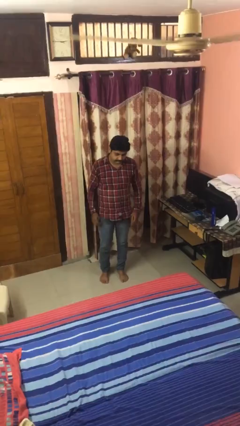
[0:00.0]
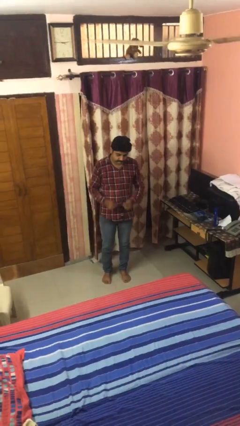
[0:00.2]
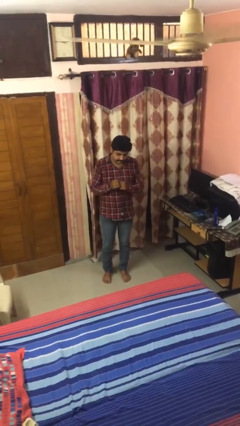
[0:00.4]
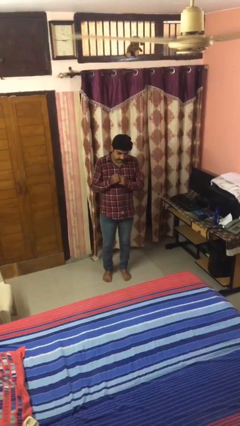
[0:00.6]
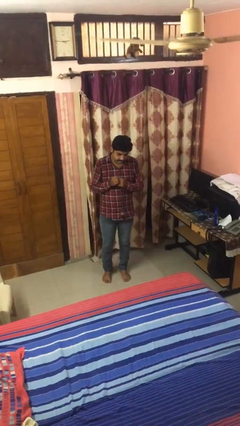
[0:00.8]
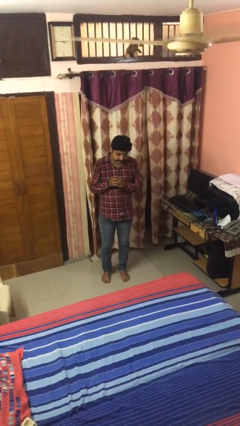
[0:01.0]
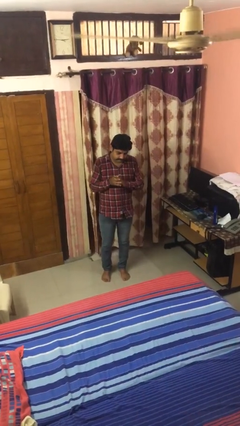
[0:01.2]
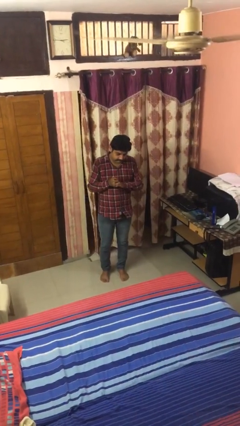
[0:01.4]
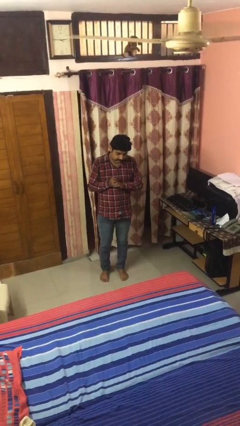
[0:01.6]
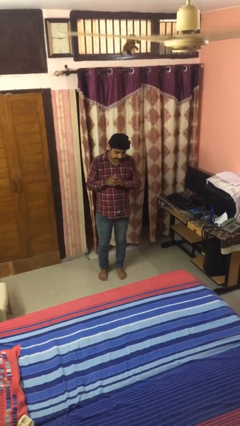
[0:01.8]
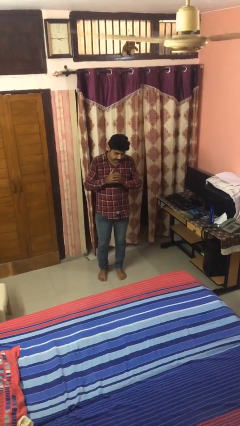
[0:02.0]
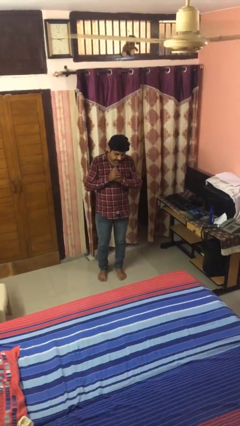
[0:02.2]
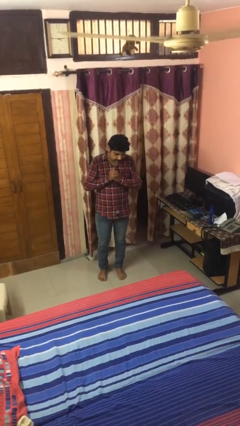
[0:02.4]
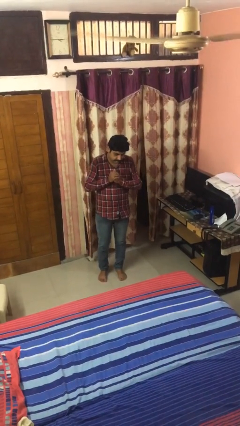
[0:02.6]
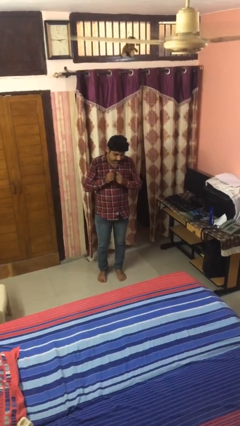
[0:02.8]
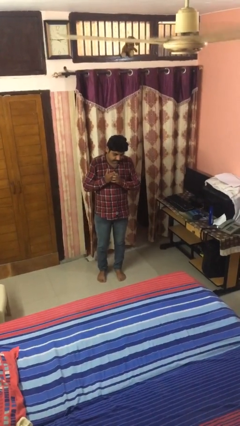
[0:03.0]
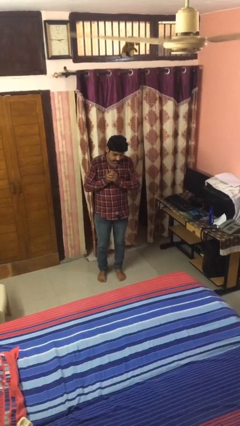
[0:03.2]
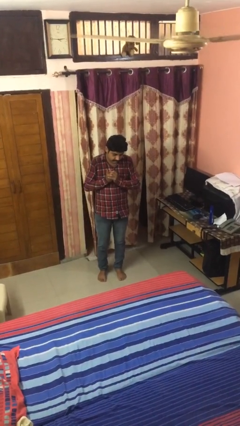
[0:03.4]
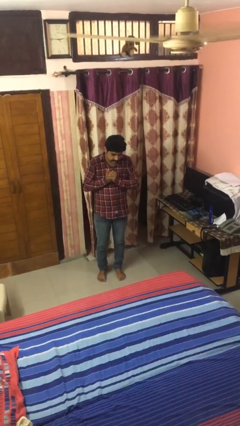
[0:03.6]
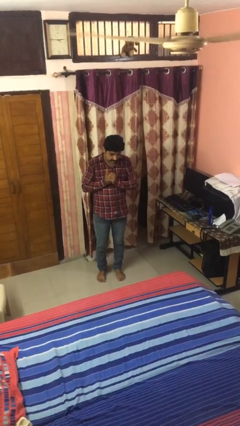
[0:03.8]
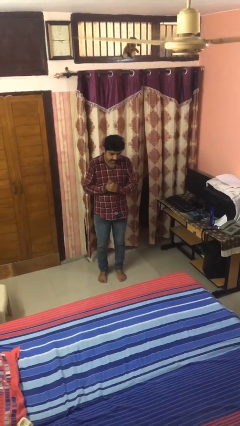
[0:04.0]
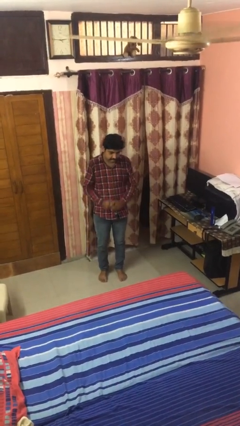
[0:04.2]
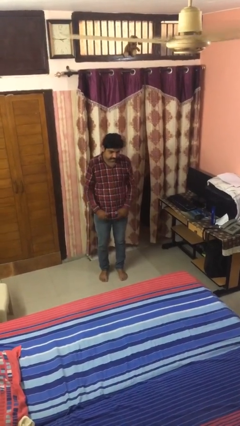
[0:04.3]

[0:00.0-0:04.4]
person cracks knuckles

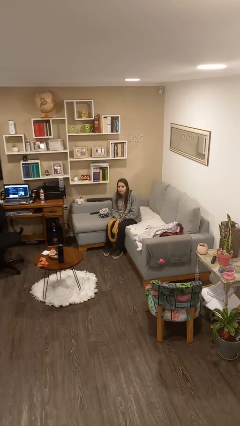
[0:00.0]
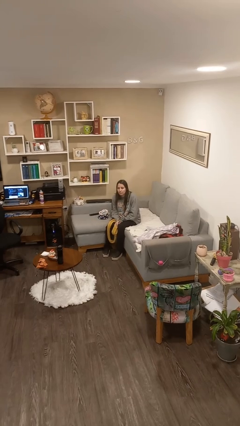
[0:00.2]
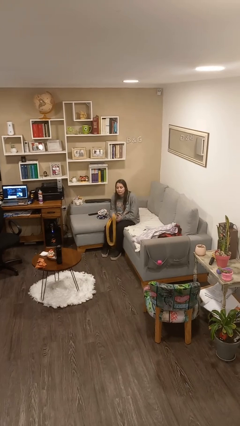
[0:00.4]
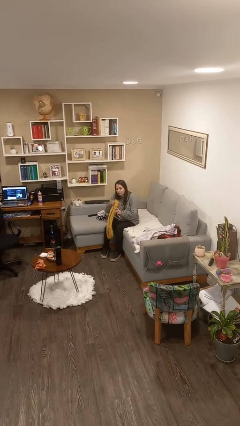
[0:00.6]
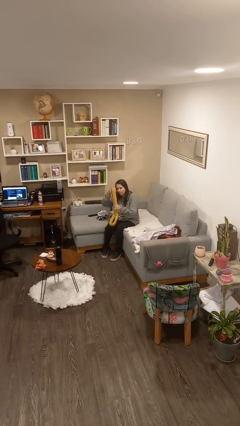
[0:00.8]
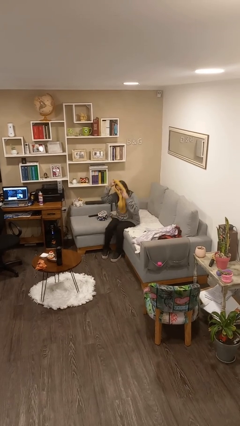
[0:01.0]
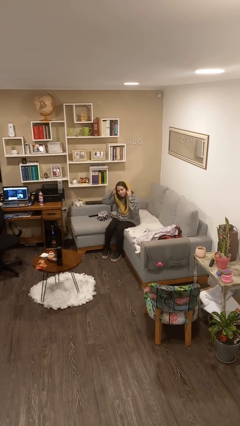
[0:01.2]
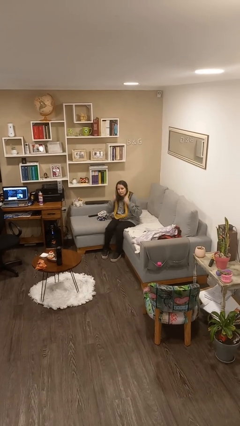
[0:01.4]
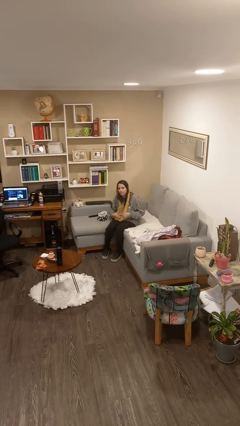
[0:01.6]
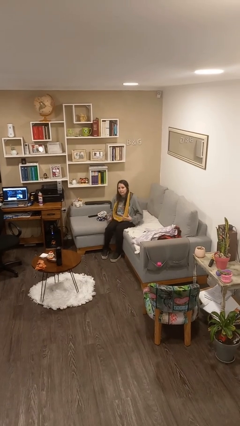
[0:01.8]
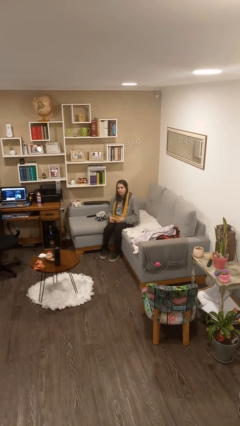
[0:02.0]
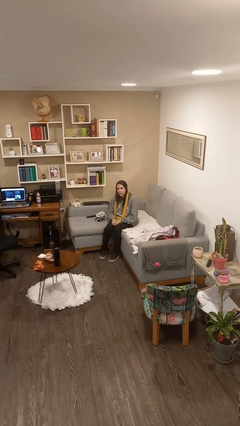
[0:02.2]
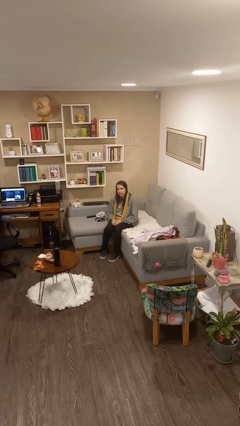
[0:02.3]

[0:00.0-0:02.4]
person puts on scarf

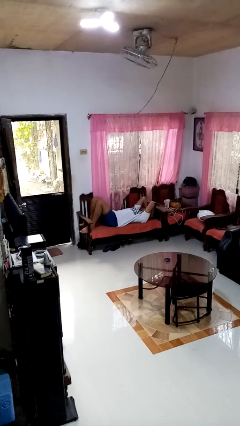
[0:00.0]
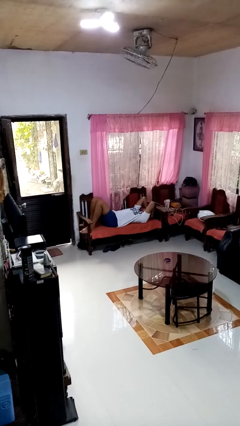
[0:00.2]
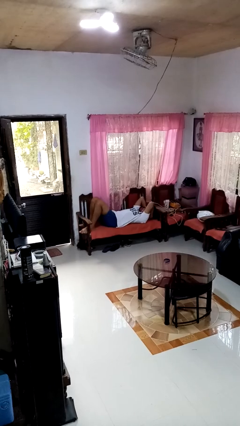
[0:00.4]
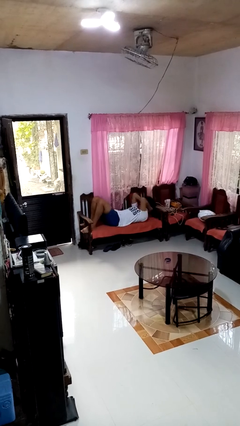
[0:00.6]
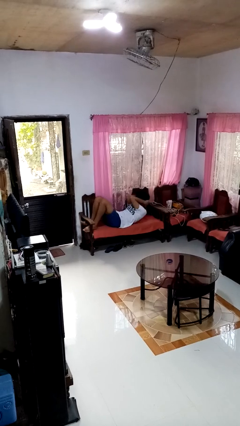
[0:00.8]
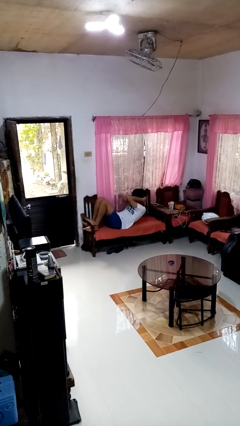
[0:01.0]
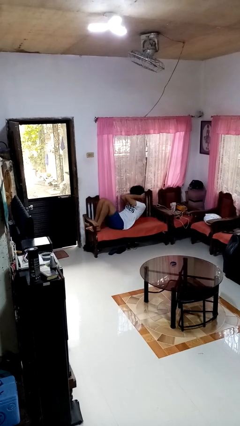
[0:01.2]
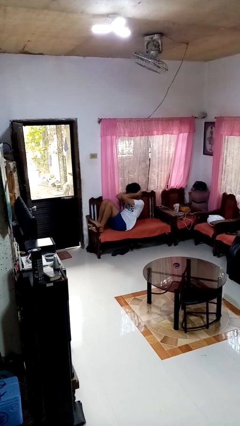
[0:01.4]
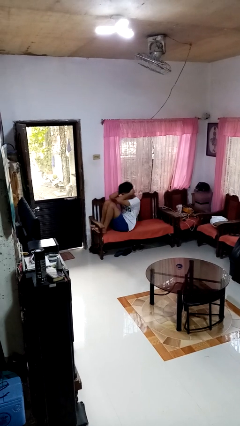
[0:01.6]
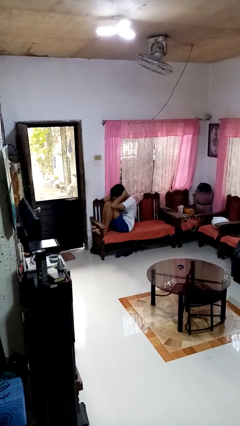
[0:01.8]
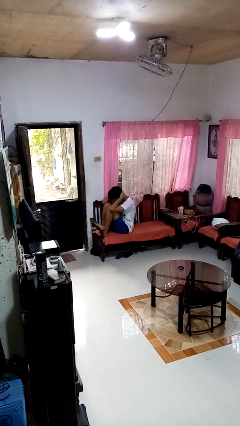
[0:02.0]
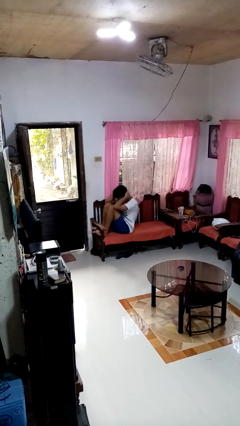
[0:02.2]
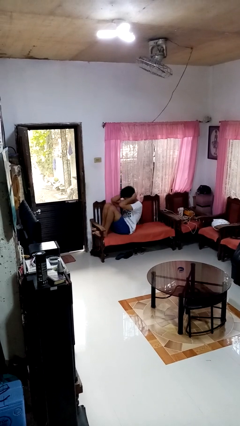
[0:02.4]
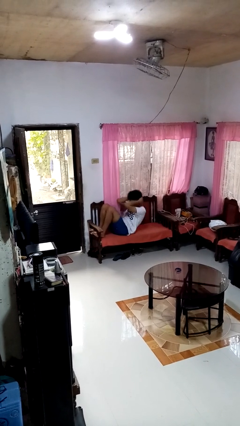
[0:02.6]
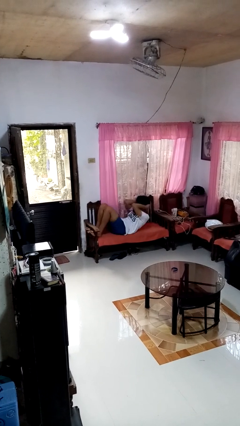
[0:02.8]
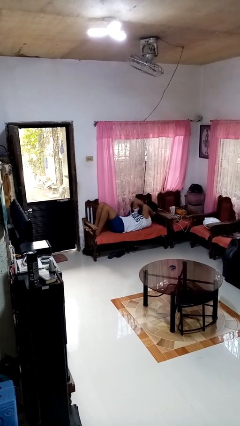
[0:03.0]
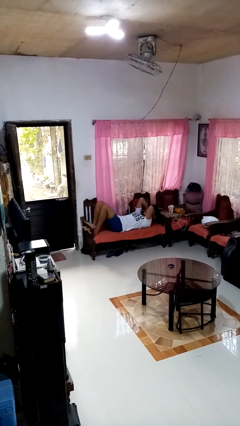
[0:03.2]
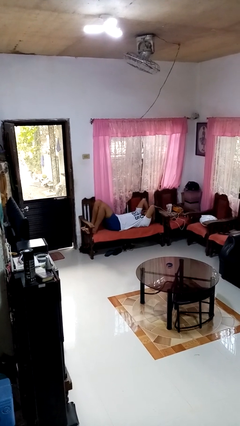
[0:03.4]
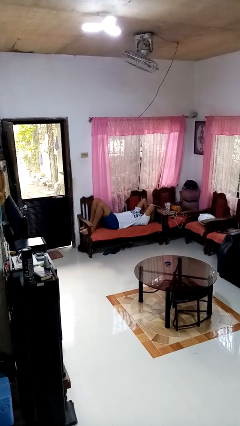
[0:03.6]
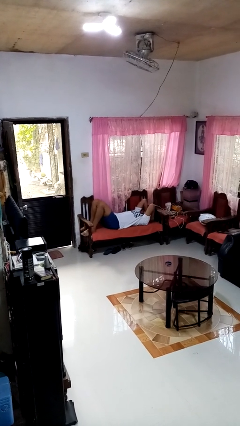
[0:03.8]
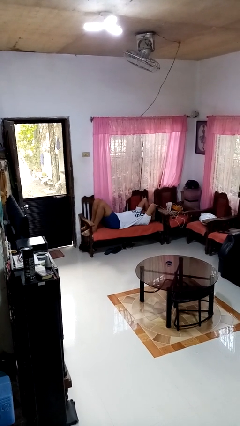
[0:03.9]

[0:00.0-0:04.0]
person exercises with situp

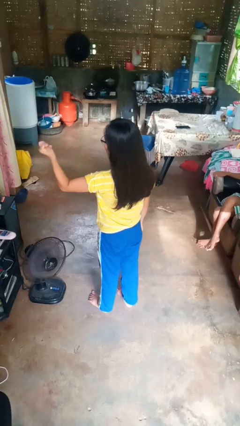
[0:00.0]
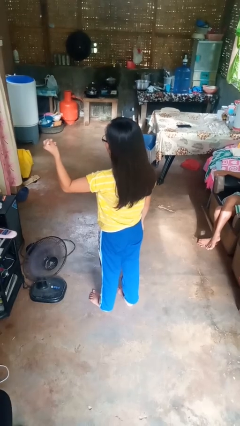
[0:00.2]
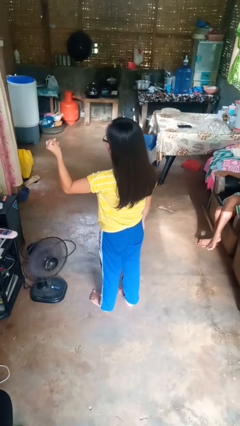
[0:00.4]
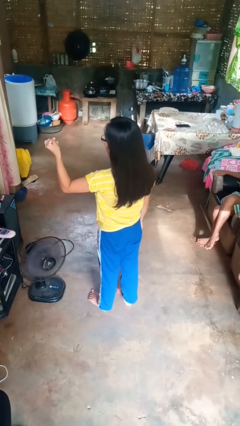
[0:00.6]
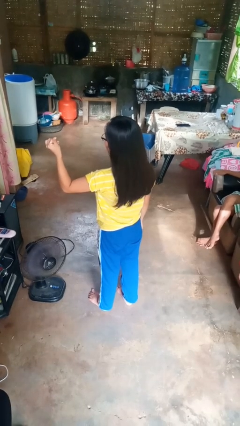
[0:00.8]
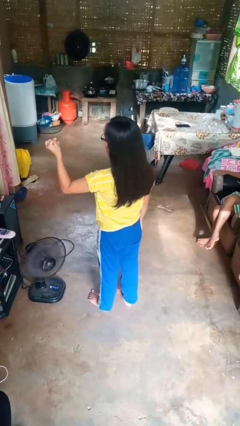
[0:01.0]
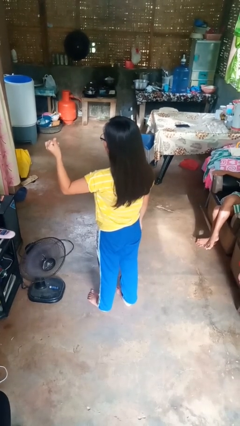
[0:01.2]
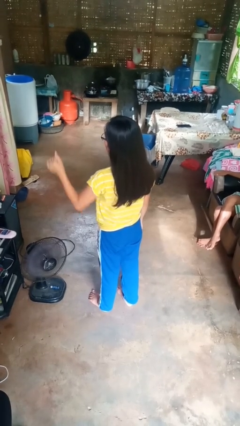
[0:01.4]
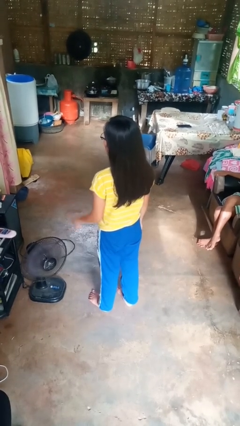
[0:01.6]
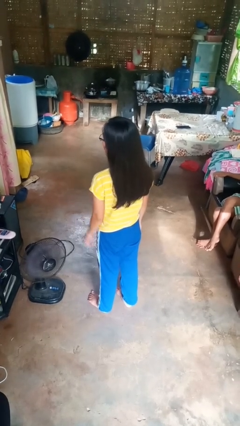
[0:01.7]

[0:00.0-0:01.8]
person snaps fingers

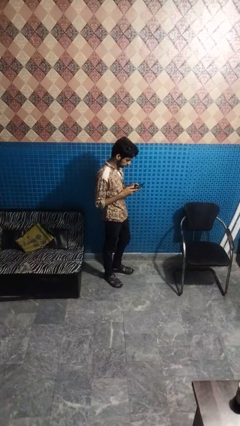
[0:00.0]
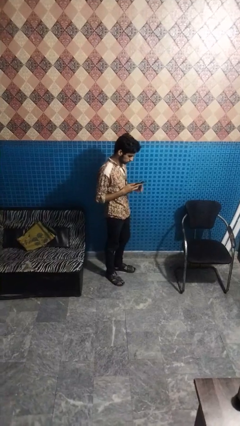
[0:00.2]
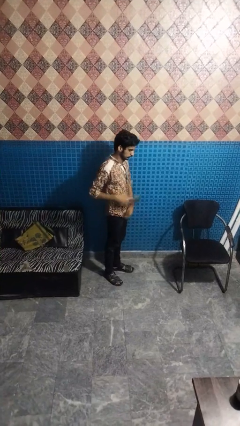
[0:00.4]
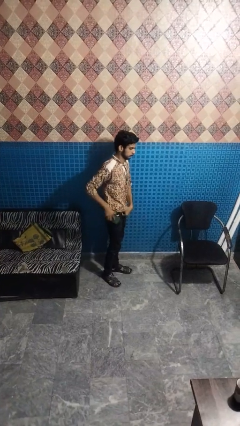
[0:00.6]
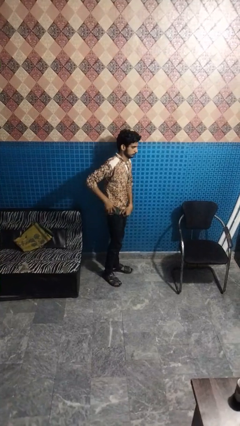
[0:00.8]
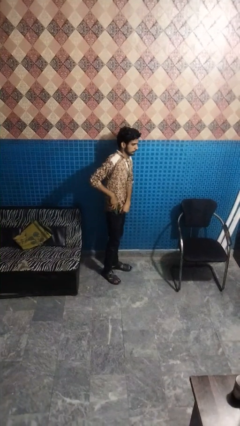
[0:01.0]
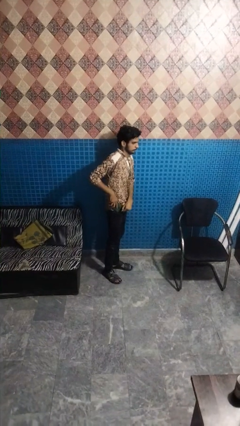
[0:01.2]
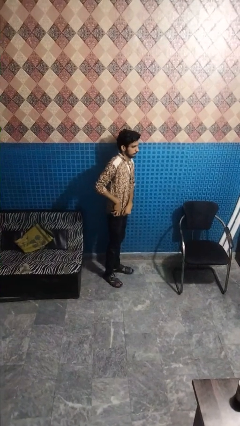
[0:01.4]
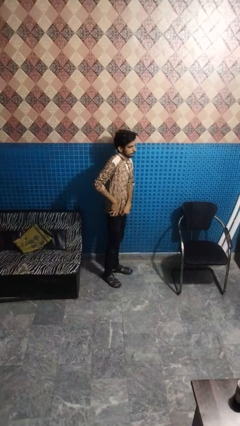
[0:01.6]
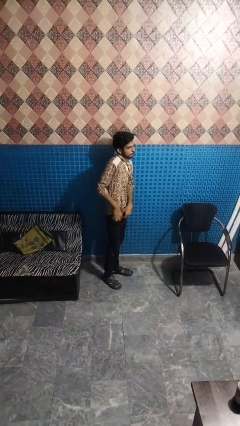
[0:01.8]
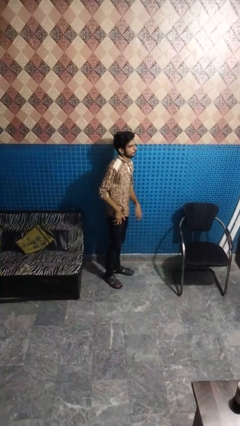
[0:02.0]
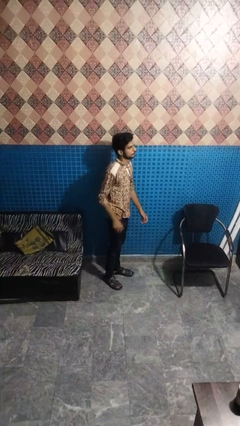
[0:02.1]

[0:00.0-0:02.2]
person puts phone into pocket

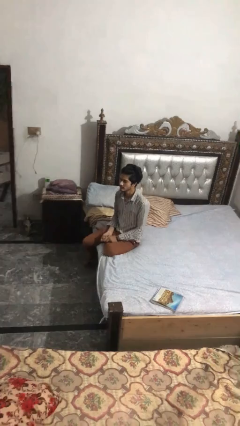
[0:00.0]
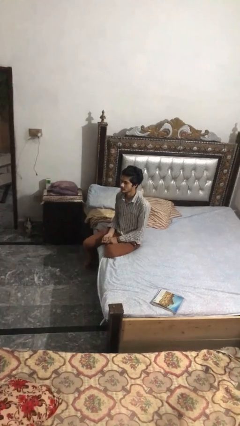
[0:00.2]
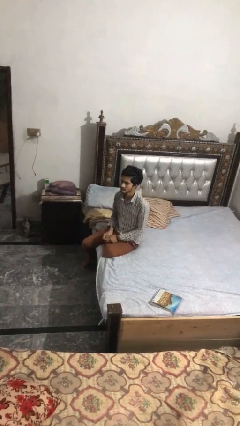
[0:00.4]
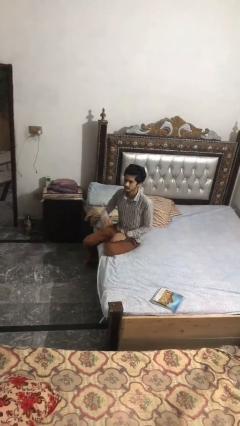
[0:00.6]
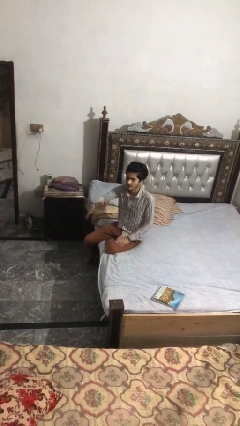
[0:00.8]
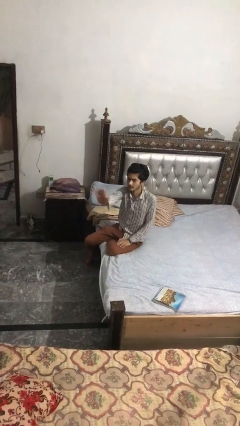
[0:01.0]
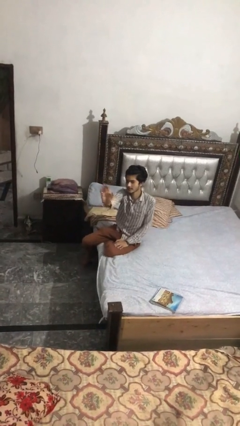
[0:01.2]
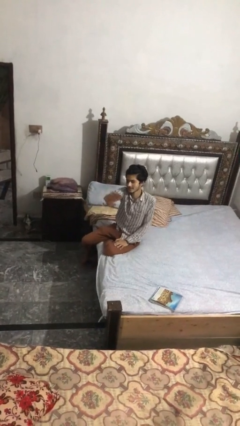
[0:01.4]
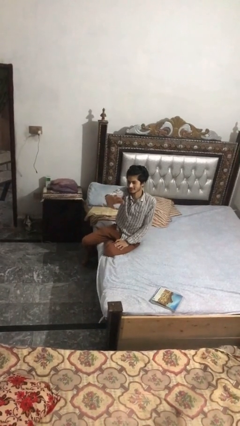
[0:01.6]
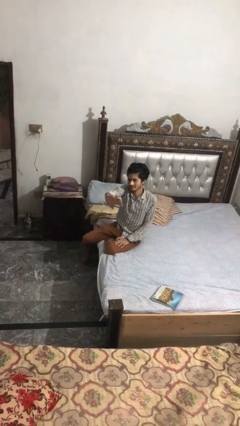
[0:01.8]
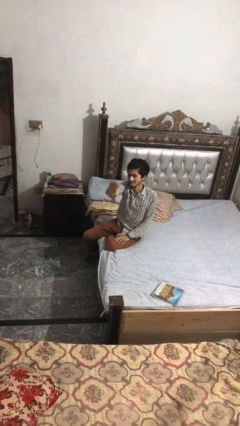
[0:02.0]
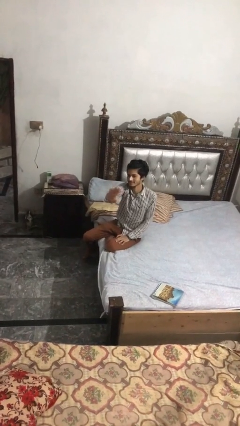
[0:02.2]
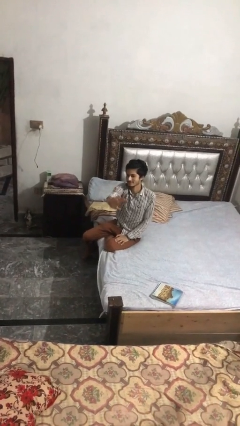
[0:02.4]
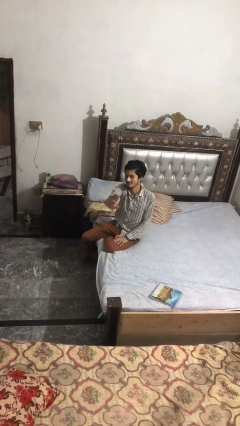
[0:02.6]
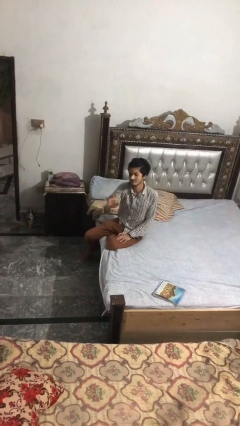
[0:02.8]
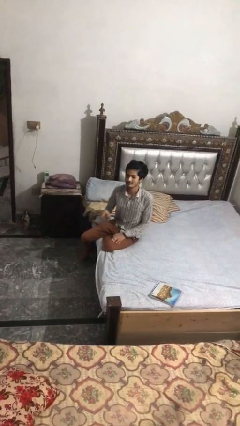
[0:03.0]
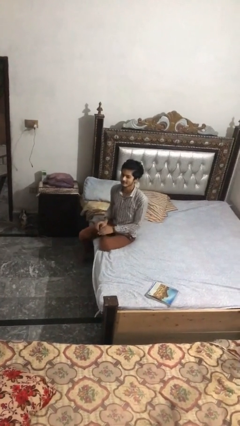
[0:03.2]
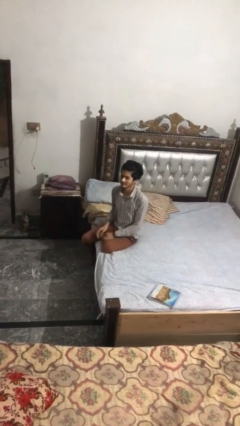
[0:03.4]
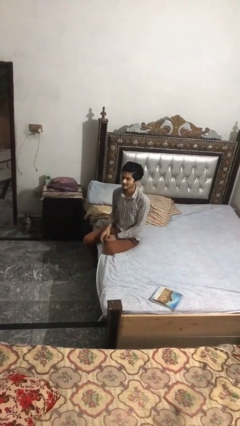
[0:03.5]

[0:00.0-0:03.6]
person waves at person
